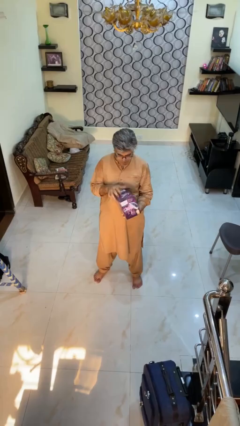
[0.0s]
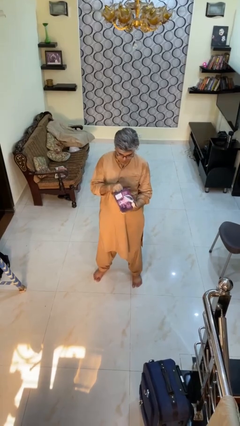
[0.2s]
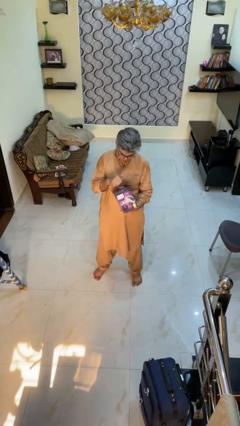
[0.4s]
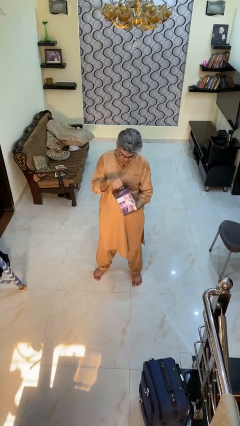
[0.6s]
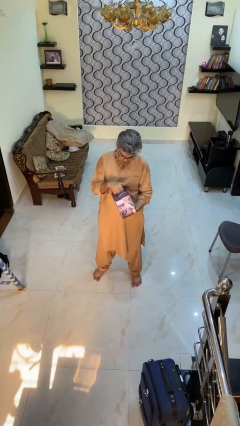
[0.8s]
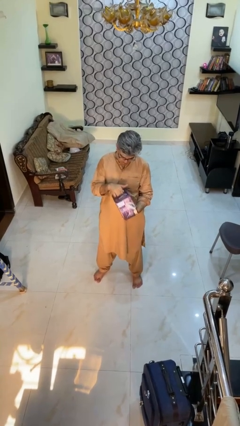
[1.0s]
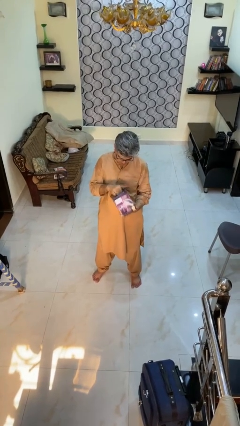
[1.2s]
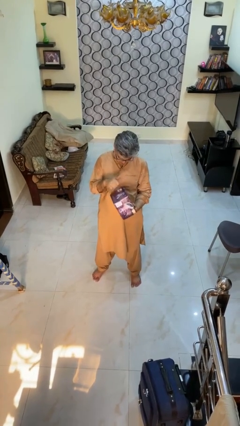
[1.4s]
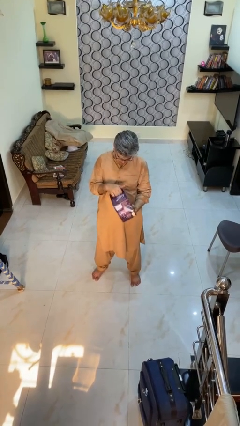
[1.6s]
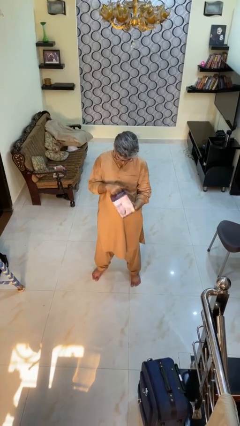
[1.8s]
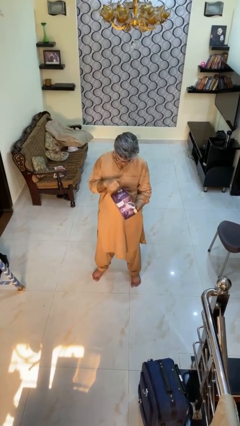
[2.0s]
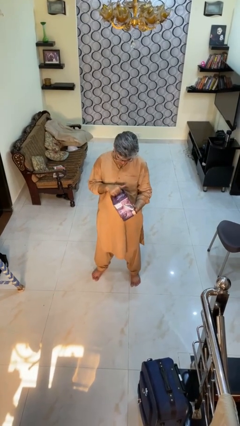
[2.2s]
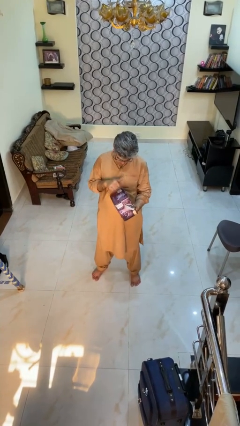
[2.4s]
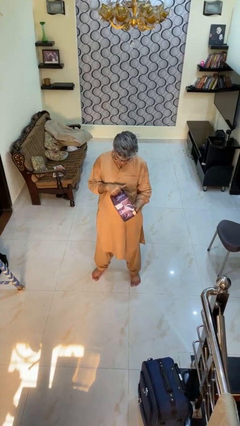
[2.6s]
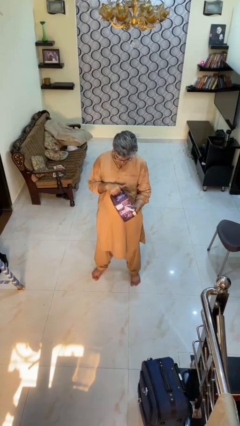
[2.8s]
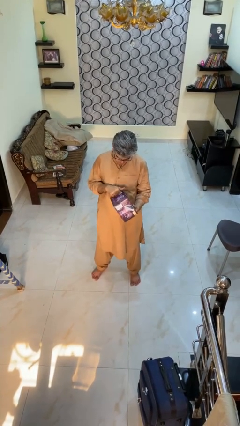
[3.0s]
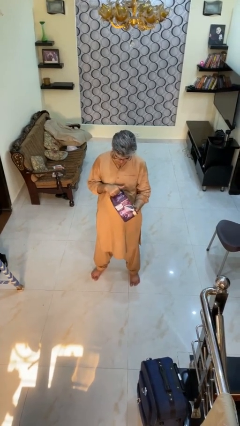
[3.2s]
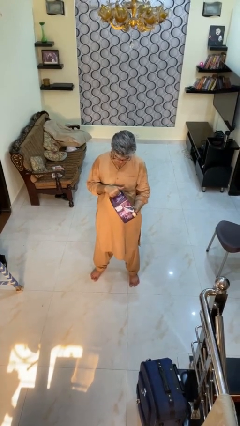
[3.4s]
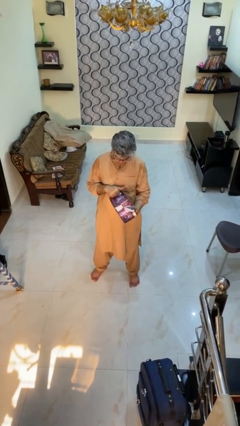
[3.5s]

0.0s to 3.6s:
person taps object with finger

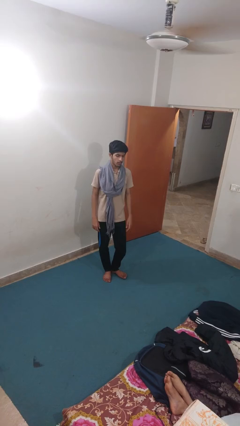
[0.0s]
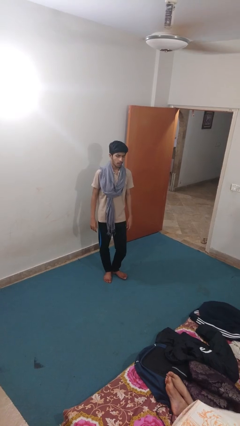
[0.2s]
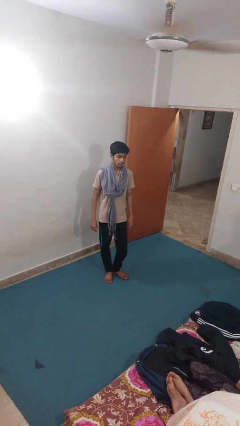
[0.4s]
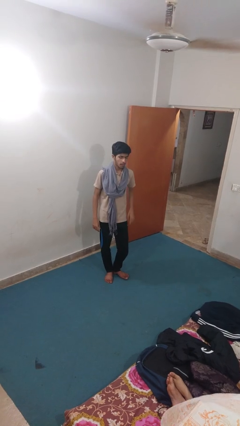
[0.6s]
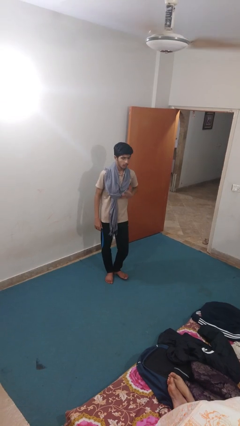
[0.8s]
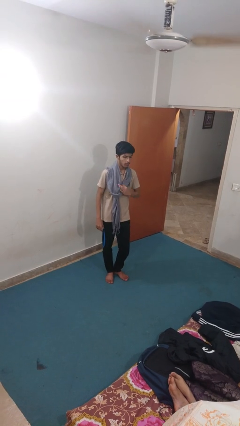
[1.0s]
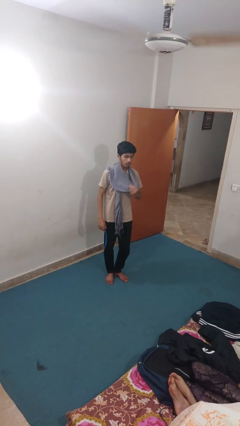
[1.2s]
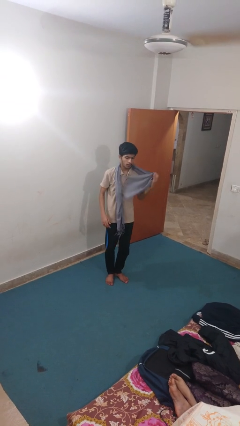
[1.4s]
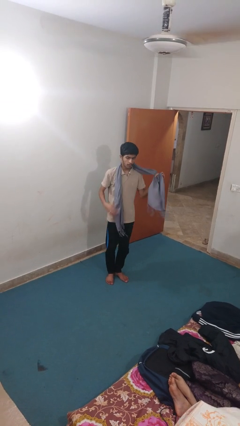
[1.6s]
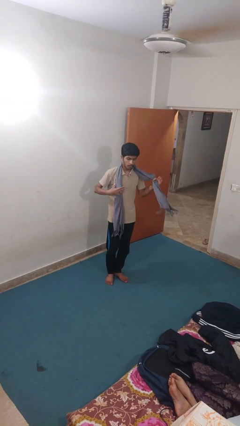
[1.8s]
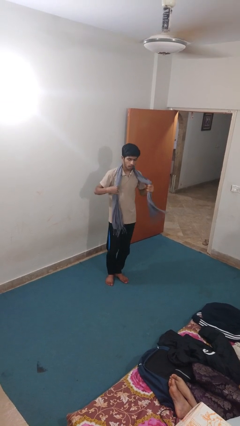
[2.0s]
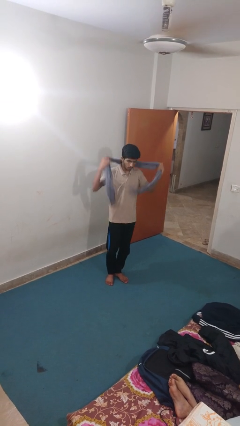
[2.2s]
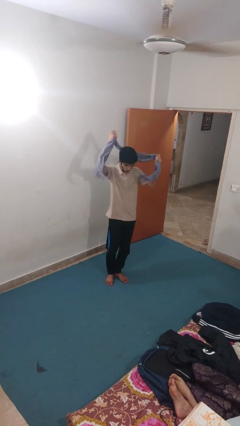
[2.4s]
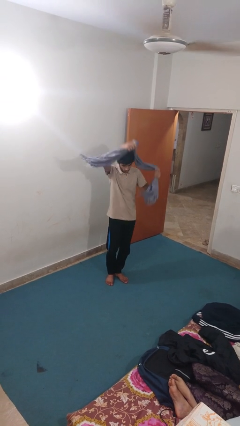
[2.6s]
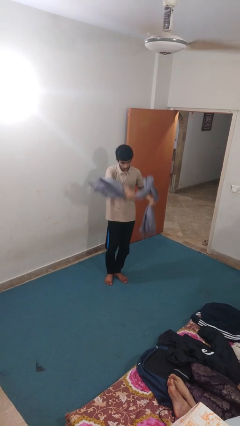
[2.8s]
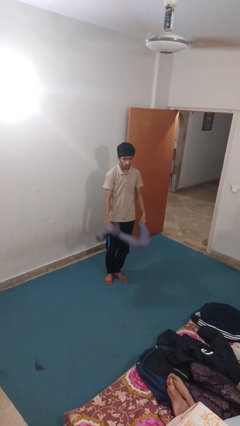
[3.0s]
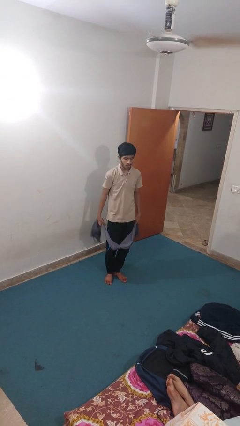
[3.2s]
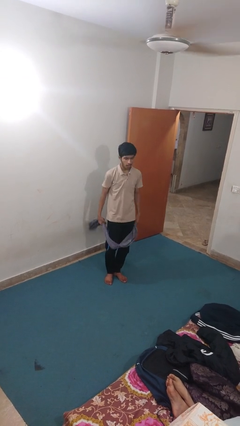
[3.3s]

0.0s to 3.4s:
person takes off scarf

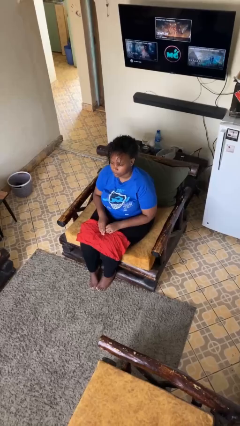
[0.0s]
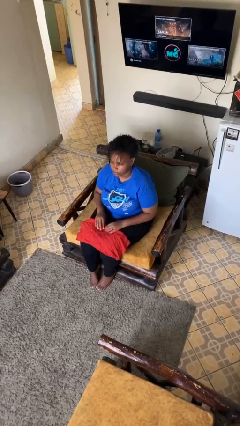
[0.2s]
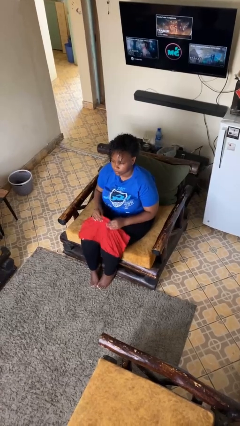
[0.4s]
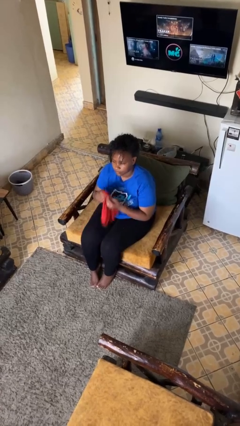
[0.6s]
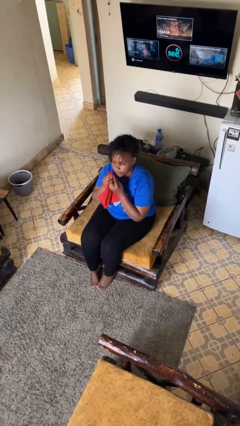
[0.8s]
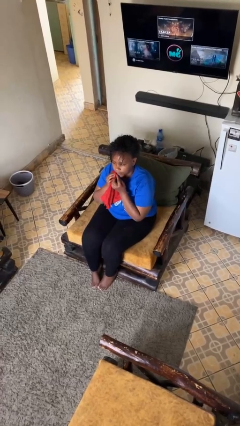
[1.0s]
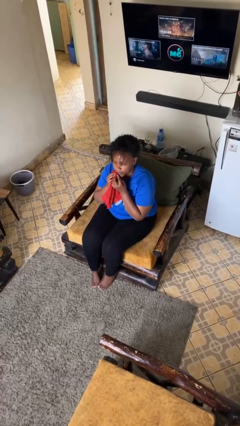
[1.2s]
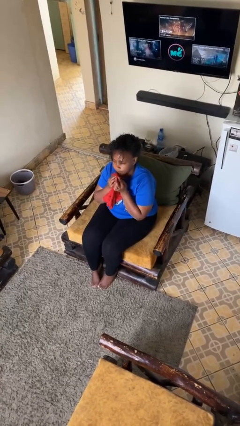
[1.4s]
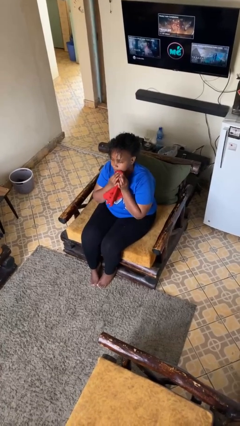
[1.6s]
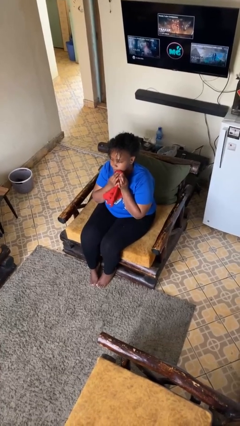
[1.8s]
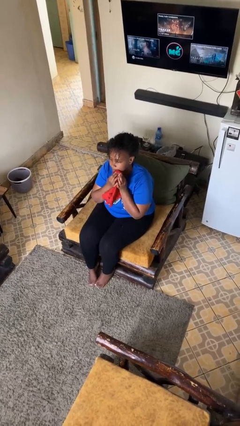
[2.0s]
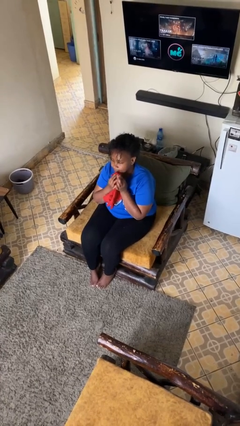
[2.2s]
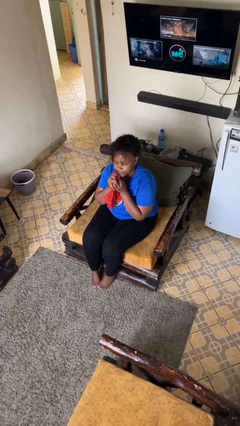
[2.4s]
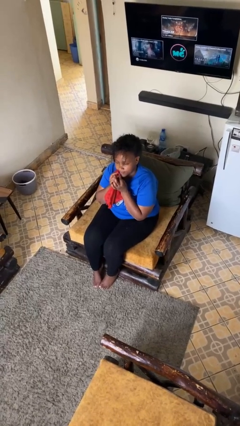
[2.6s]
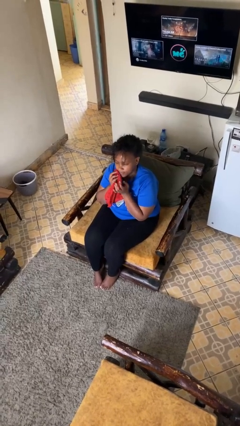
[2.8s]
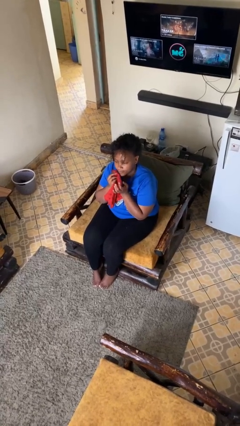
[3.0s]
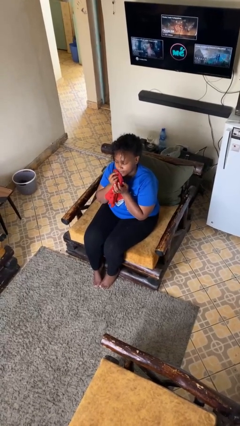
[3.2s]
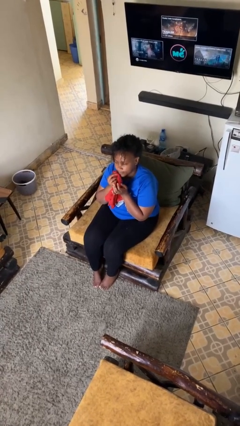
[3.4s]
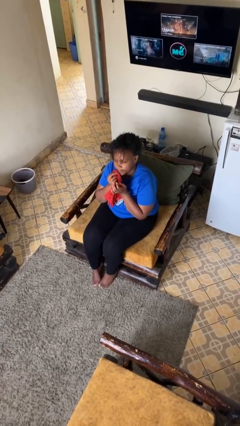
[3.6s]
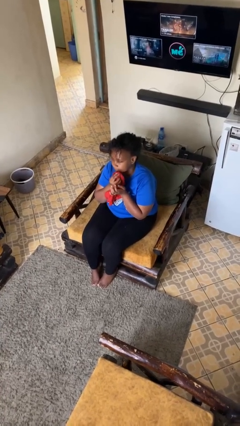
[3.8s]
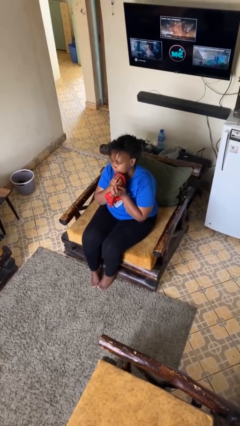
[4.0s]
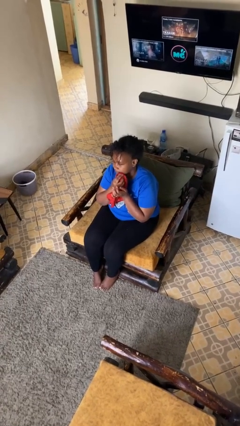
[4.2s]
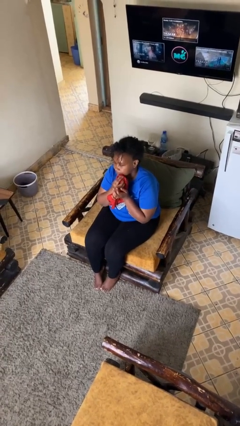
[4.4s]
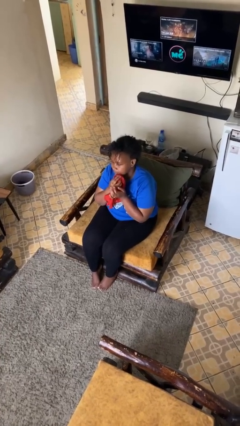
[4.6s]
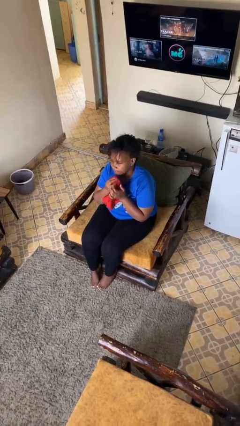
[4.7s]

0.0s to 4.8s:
person wipes mouth with napkin

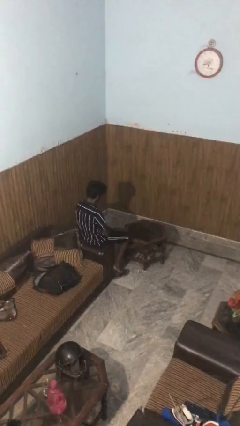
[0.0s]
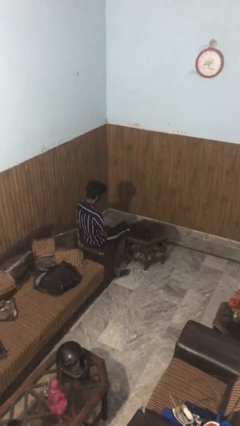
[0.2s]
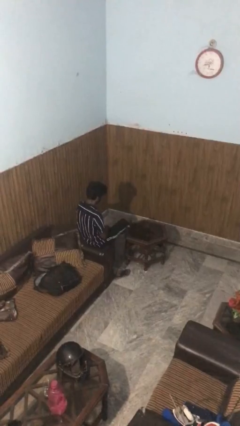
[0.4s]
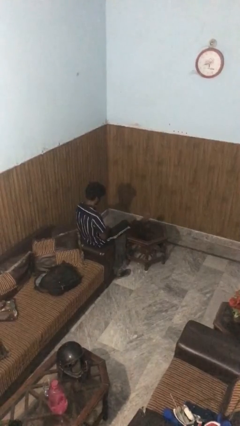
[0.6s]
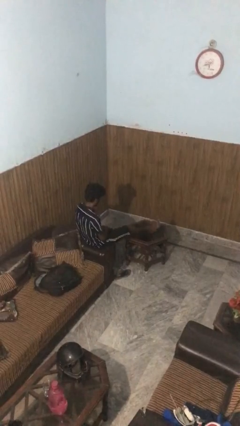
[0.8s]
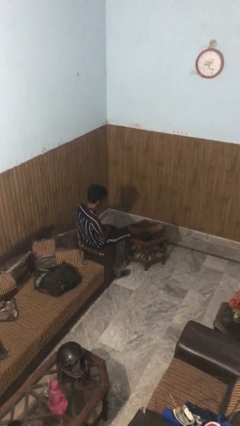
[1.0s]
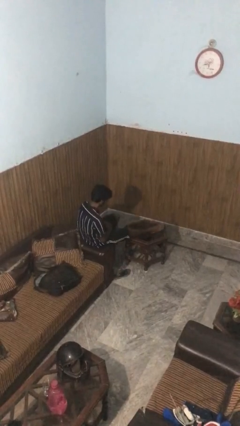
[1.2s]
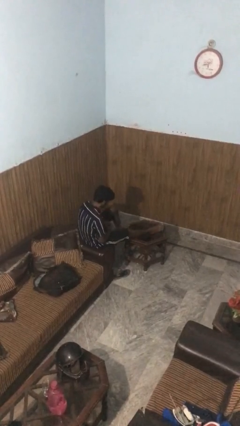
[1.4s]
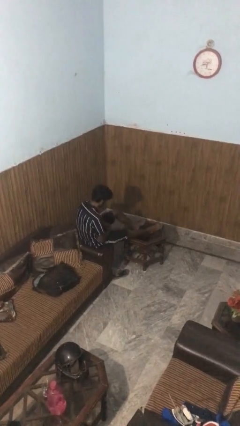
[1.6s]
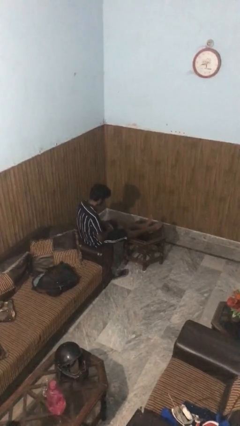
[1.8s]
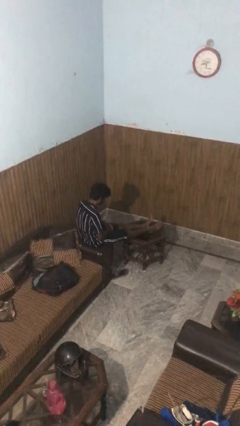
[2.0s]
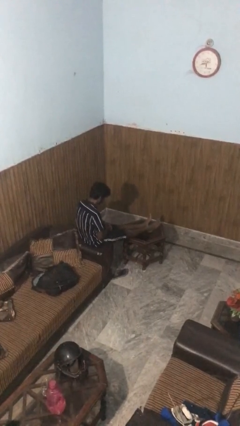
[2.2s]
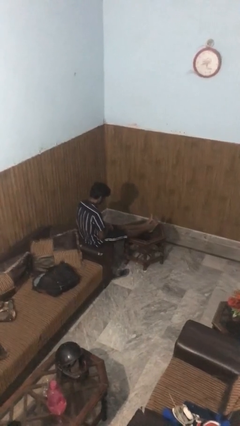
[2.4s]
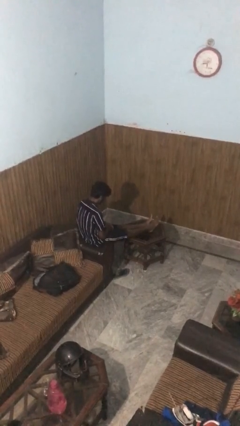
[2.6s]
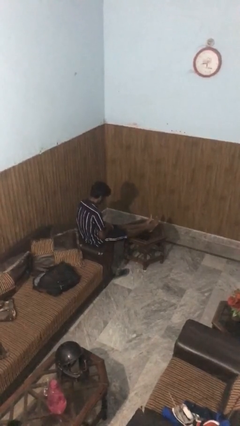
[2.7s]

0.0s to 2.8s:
person puts feet up

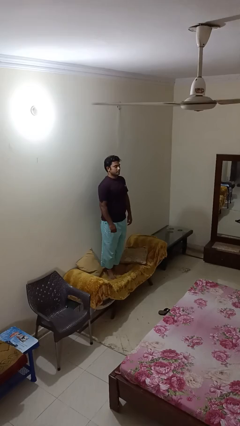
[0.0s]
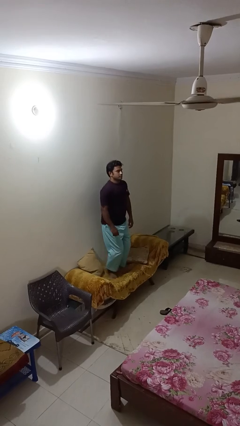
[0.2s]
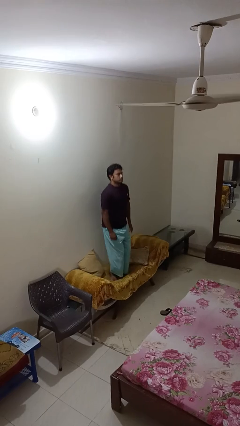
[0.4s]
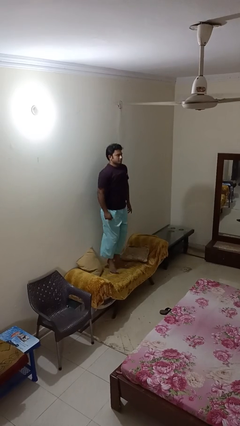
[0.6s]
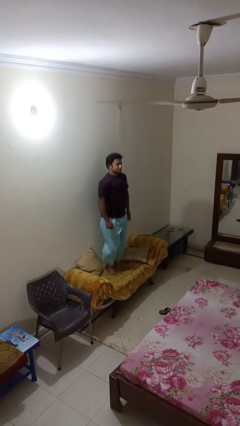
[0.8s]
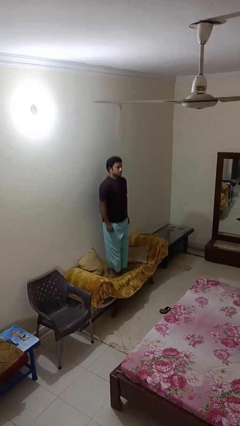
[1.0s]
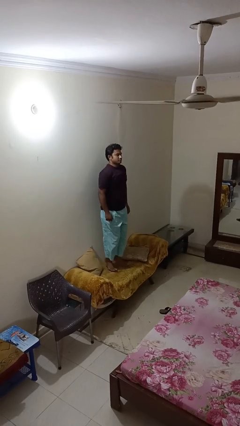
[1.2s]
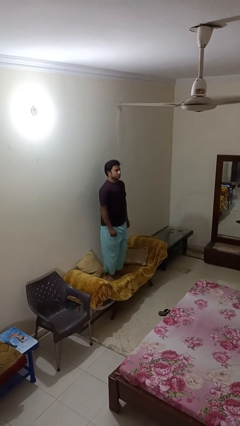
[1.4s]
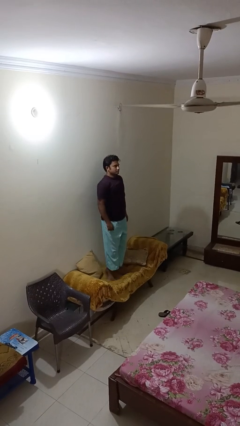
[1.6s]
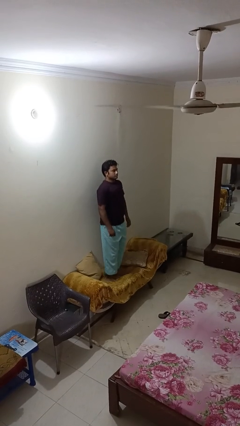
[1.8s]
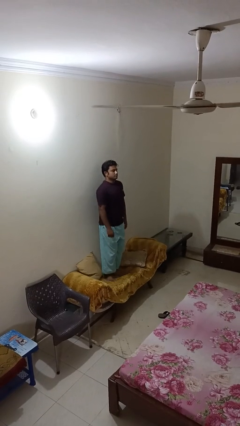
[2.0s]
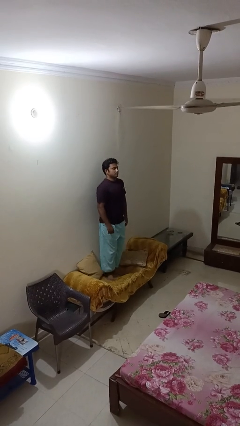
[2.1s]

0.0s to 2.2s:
person jumps on couch

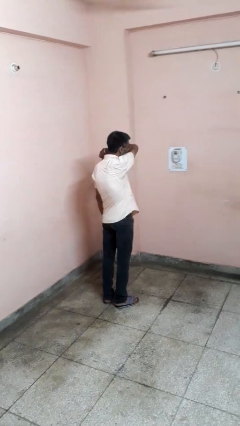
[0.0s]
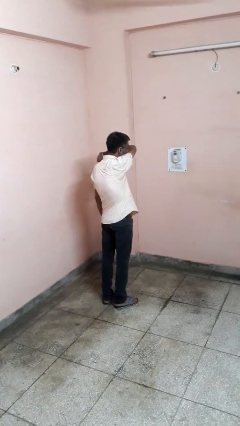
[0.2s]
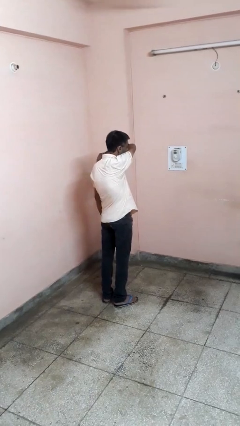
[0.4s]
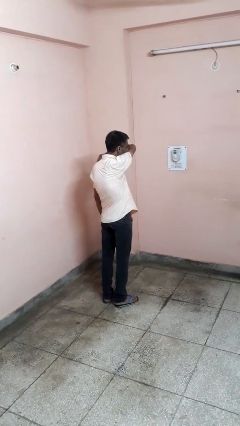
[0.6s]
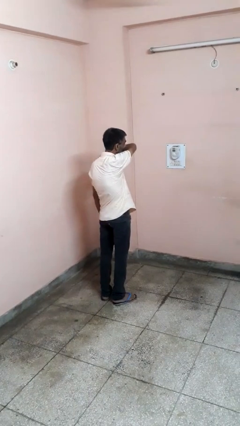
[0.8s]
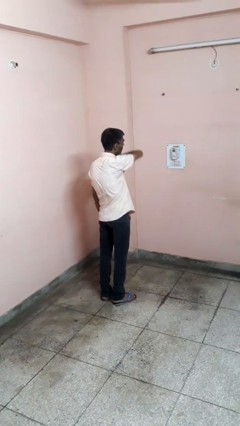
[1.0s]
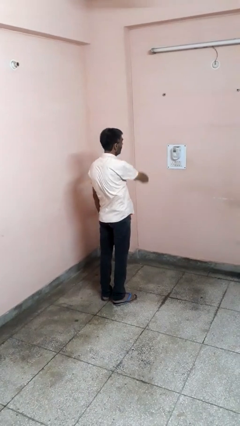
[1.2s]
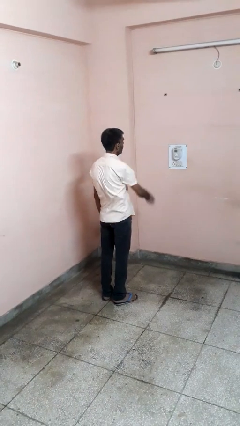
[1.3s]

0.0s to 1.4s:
person sneezes into arm
